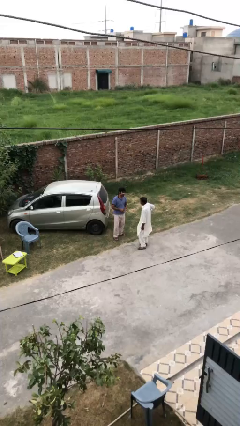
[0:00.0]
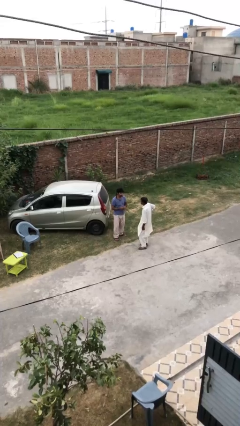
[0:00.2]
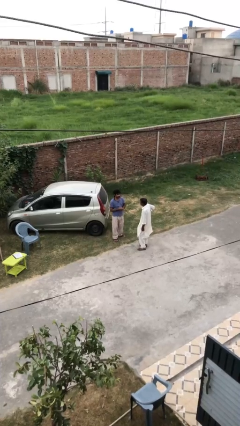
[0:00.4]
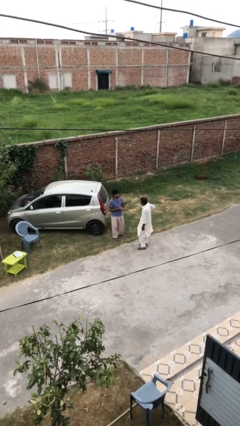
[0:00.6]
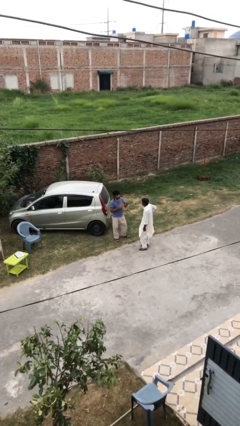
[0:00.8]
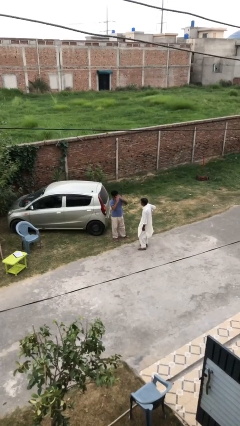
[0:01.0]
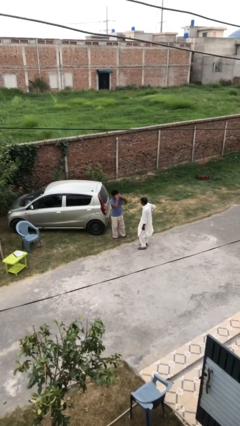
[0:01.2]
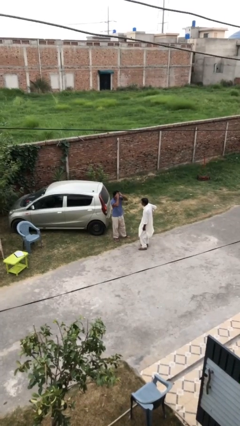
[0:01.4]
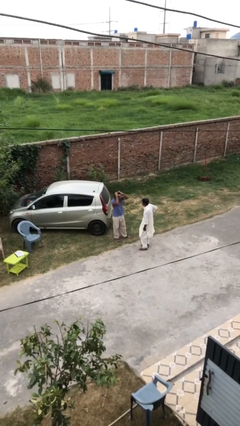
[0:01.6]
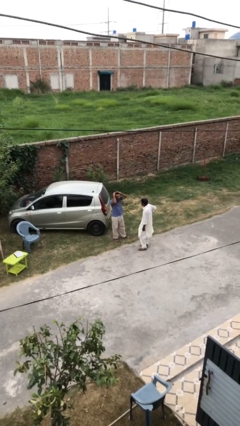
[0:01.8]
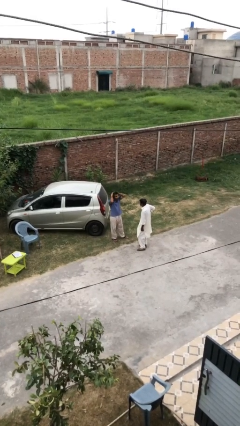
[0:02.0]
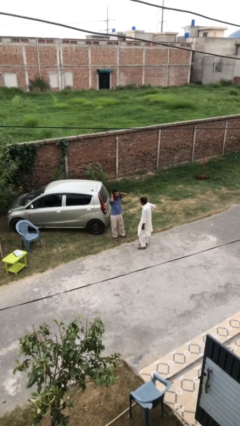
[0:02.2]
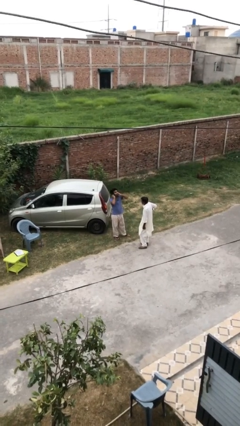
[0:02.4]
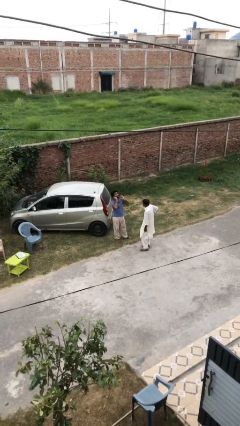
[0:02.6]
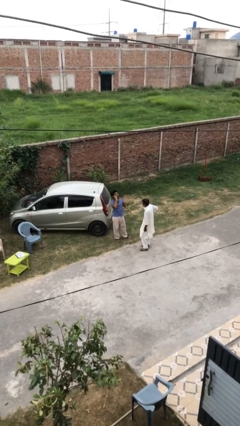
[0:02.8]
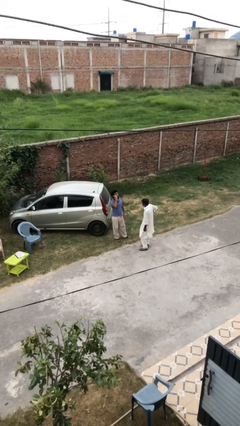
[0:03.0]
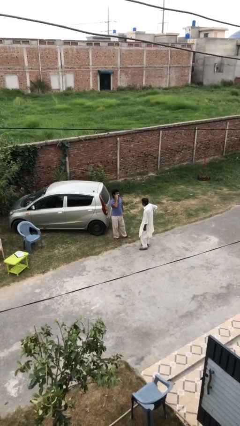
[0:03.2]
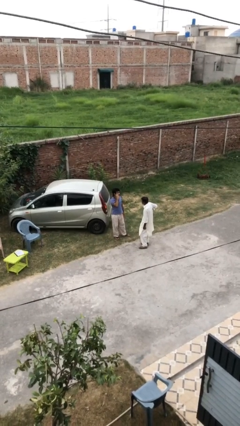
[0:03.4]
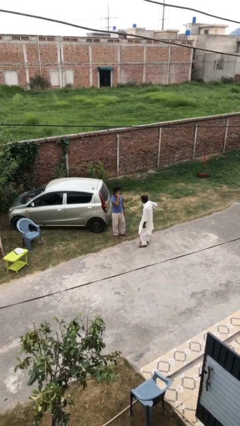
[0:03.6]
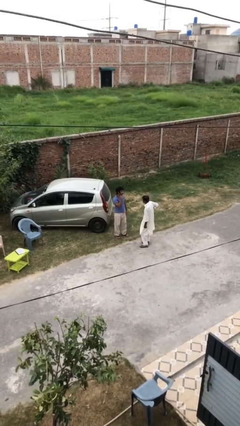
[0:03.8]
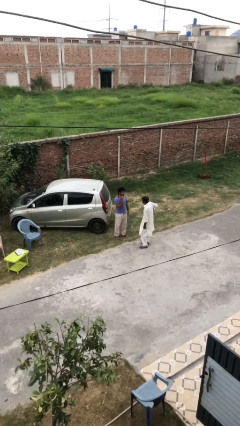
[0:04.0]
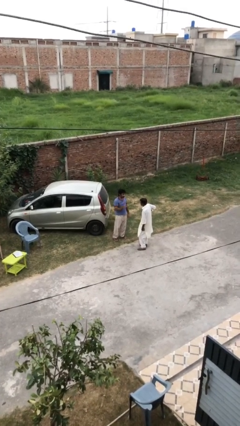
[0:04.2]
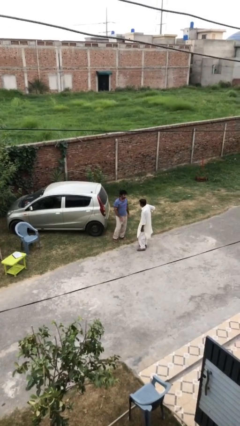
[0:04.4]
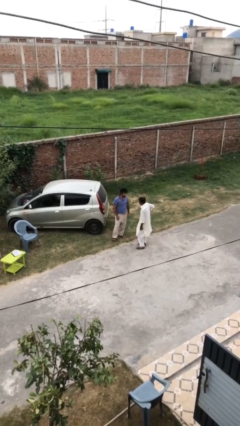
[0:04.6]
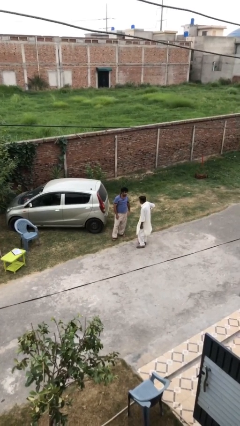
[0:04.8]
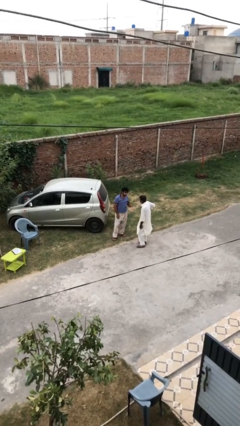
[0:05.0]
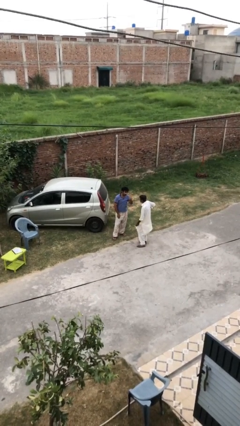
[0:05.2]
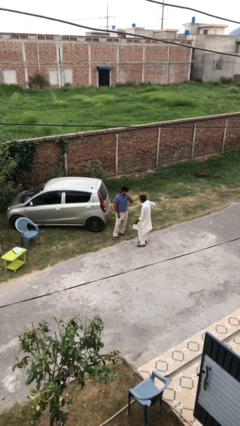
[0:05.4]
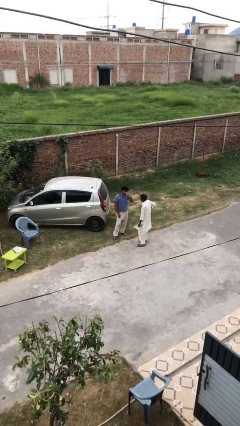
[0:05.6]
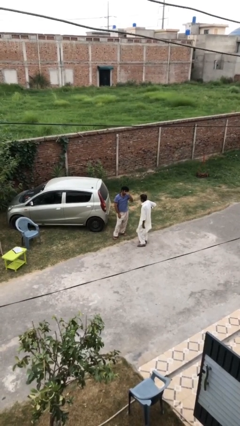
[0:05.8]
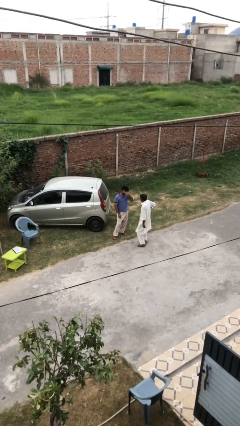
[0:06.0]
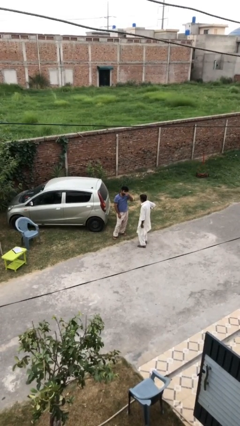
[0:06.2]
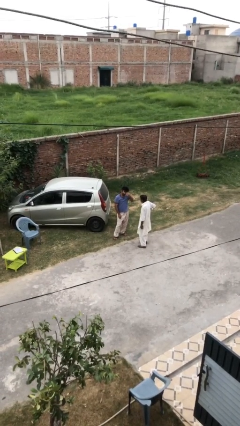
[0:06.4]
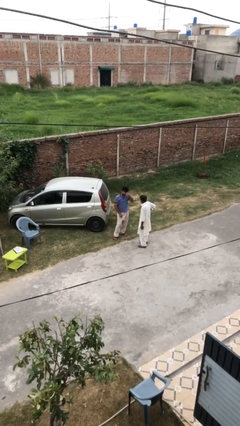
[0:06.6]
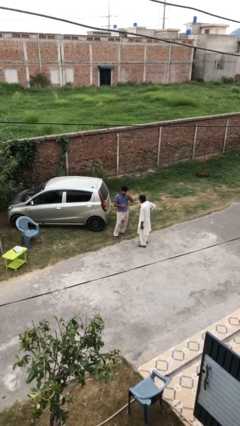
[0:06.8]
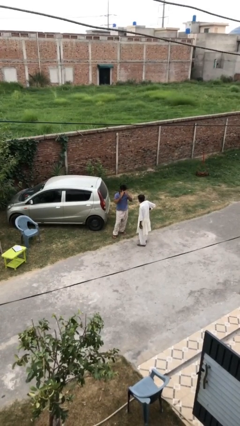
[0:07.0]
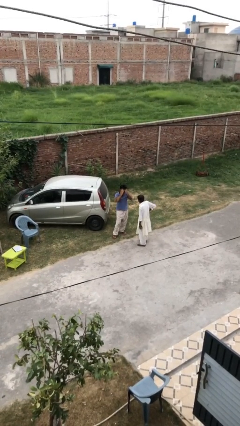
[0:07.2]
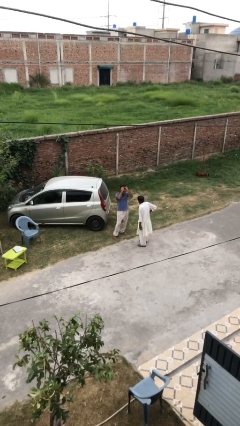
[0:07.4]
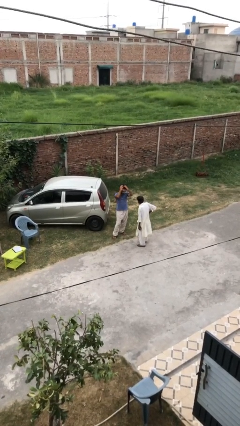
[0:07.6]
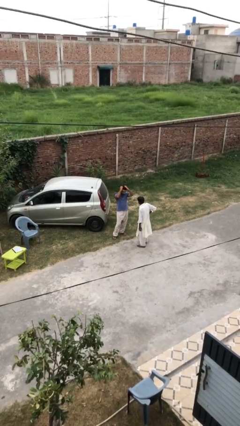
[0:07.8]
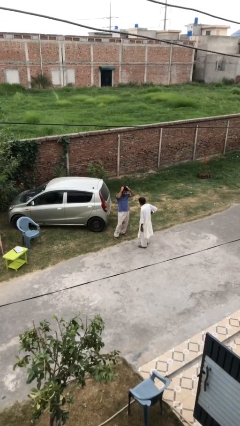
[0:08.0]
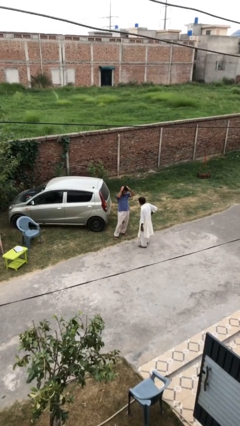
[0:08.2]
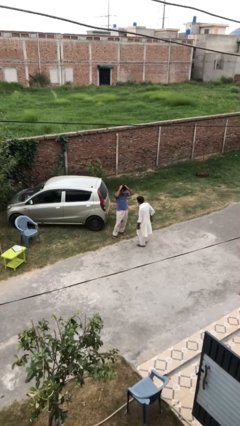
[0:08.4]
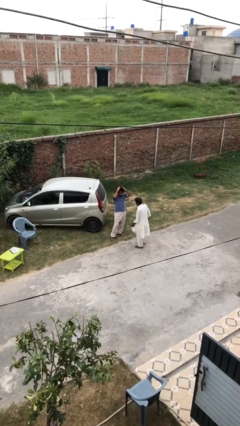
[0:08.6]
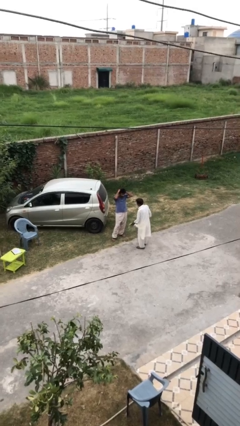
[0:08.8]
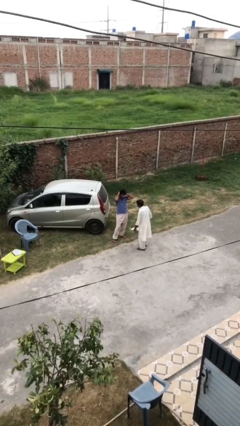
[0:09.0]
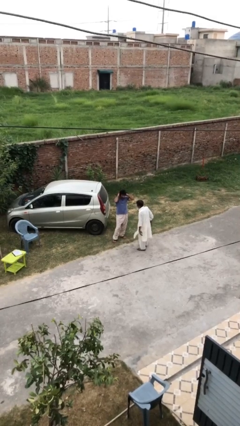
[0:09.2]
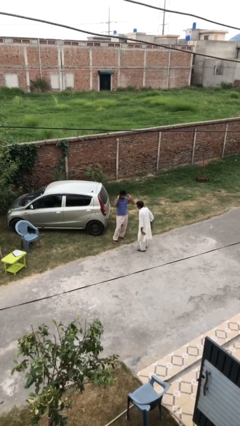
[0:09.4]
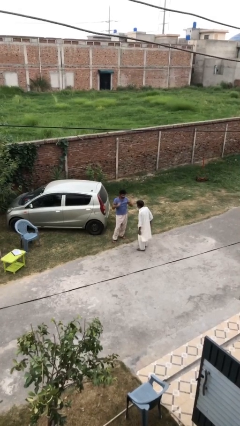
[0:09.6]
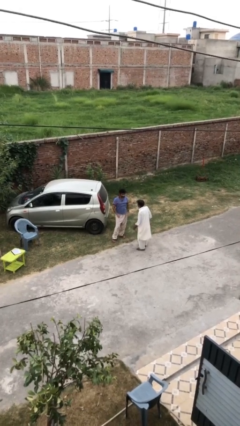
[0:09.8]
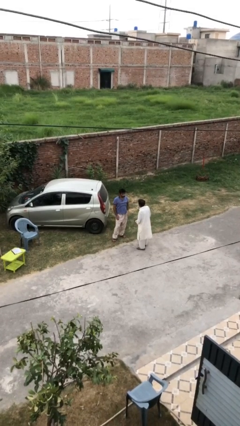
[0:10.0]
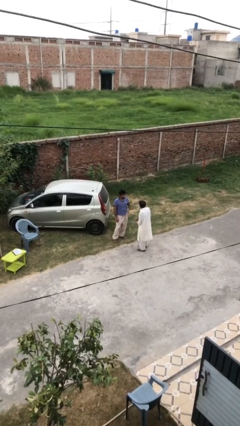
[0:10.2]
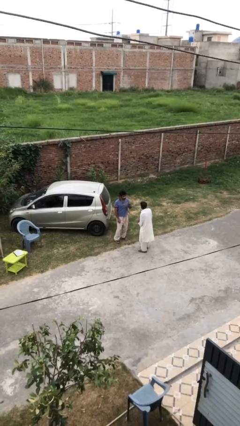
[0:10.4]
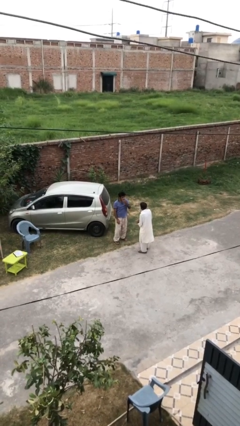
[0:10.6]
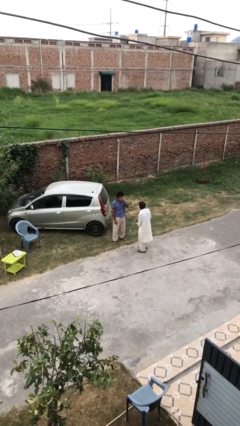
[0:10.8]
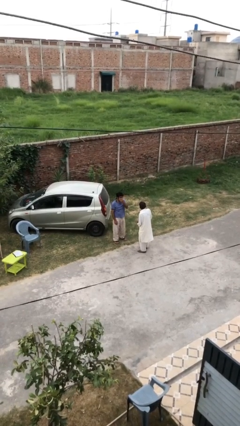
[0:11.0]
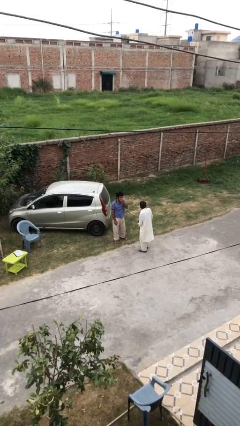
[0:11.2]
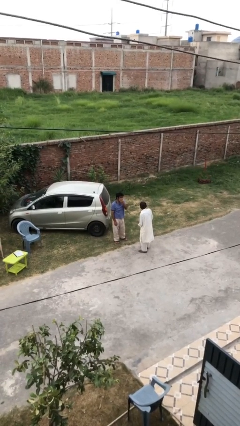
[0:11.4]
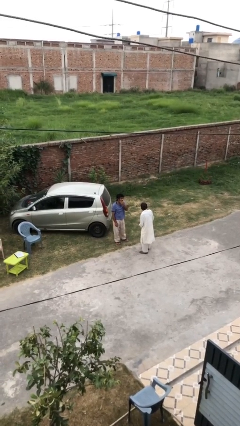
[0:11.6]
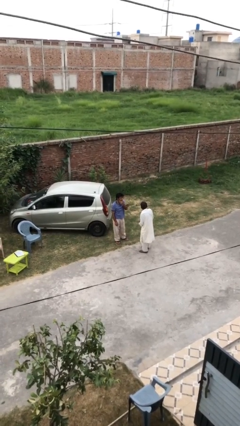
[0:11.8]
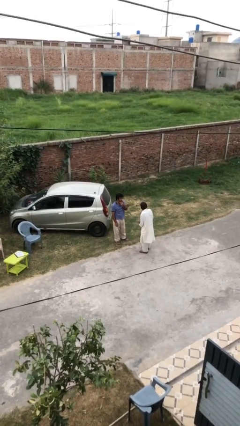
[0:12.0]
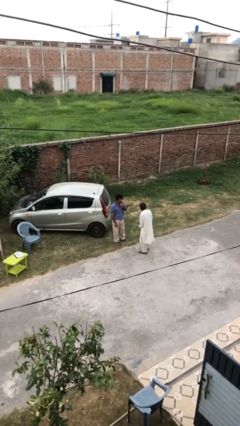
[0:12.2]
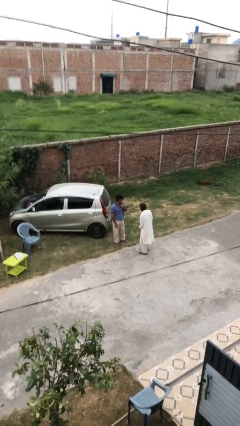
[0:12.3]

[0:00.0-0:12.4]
person talks to person

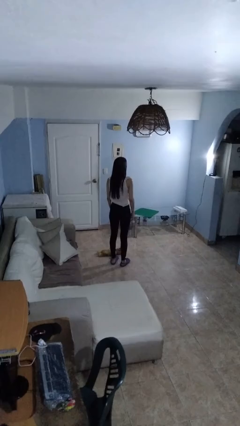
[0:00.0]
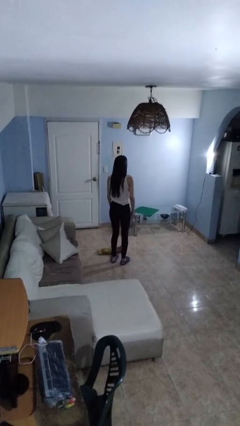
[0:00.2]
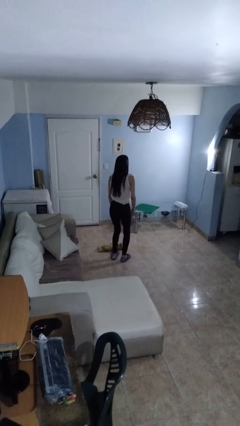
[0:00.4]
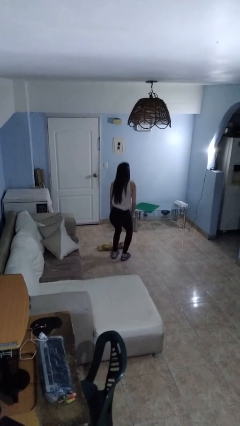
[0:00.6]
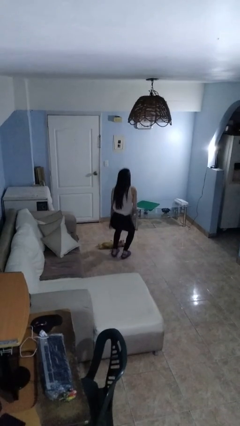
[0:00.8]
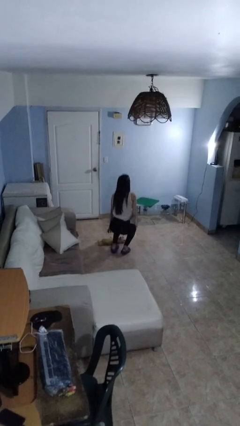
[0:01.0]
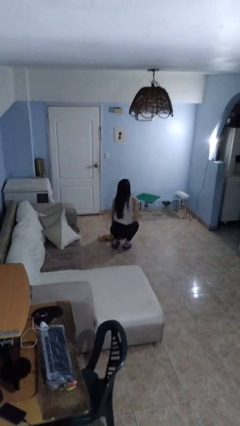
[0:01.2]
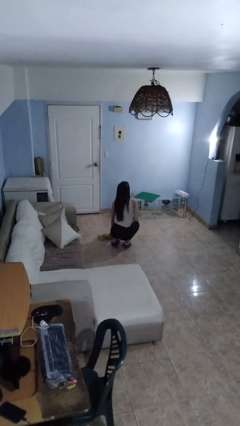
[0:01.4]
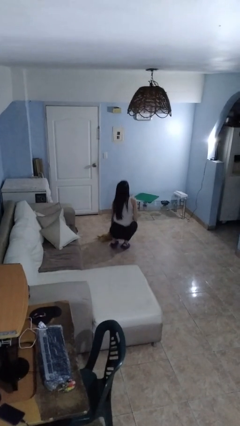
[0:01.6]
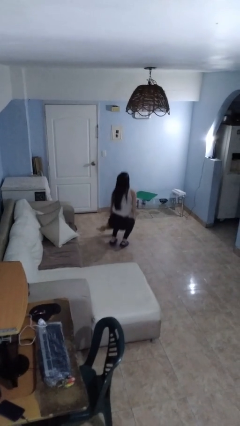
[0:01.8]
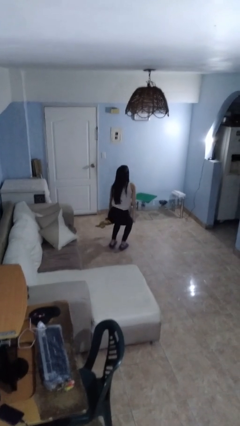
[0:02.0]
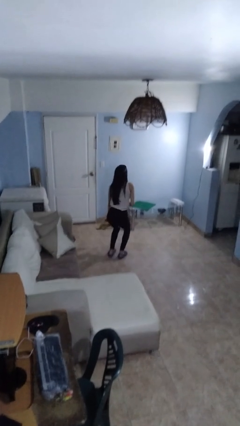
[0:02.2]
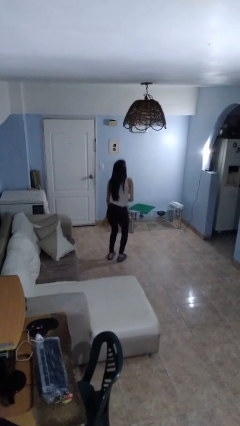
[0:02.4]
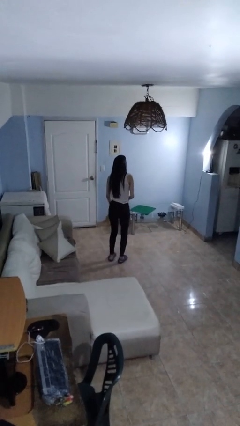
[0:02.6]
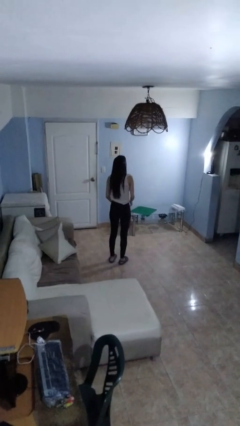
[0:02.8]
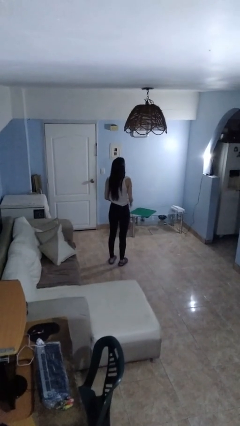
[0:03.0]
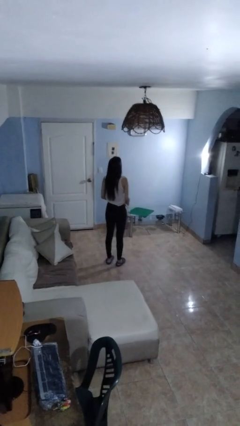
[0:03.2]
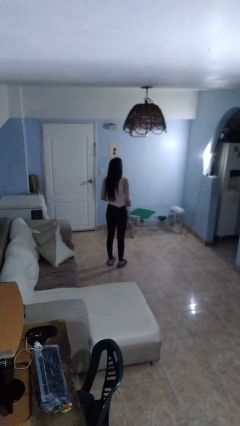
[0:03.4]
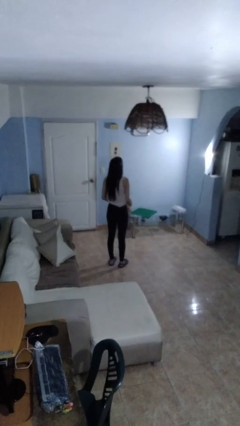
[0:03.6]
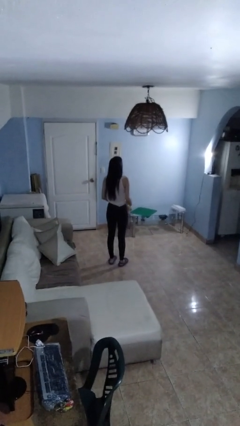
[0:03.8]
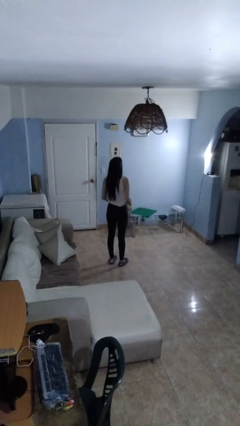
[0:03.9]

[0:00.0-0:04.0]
person picks up object from floor

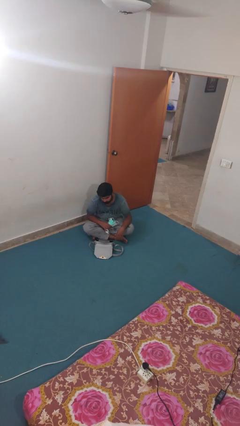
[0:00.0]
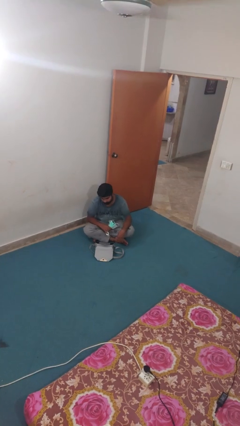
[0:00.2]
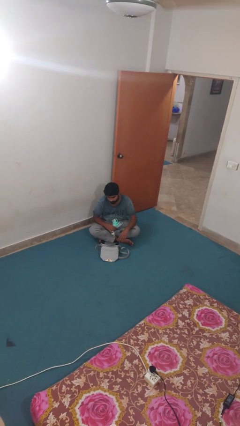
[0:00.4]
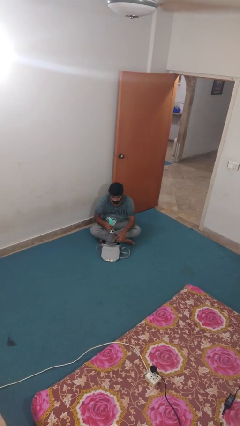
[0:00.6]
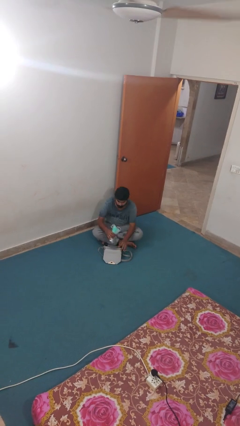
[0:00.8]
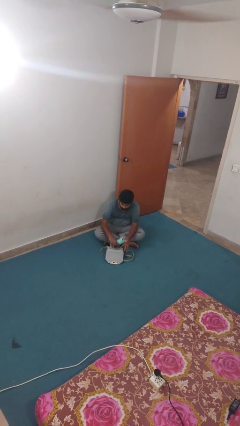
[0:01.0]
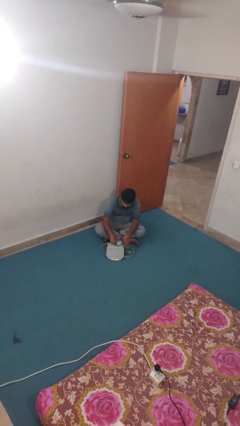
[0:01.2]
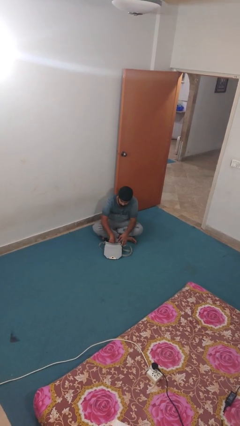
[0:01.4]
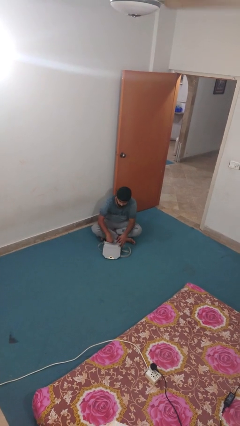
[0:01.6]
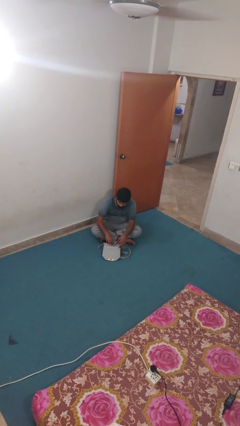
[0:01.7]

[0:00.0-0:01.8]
person puts object into purse
